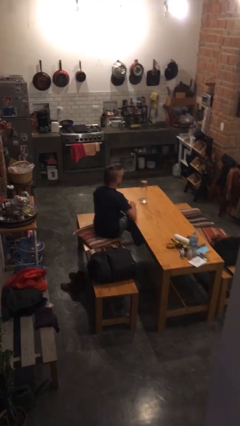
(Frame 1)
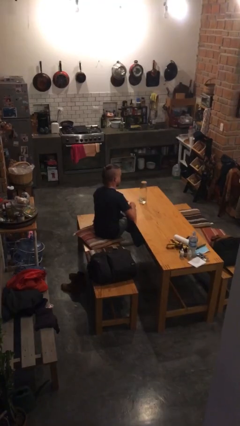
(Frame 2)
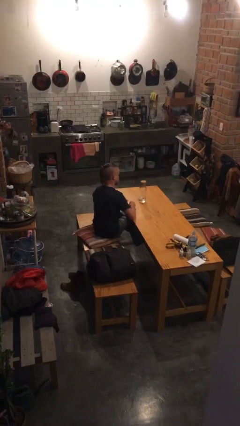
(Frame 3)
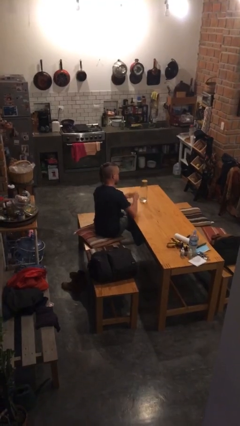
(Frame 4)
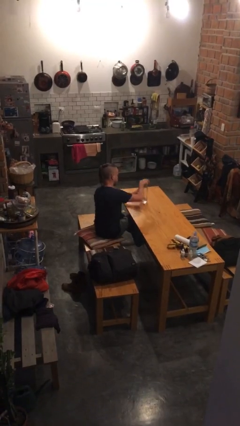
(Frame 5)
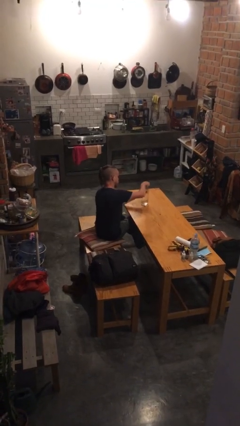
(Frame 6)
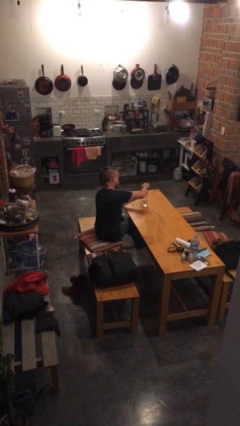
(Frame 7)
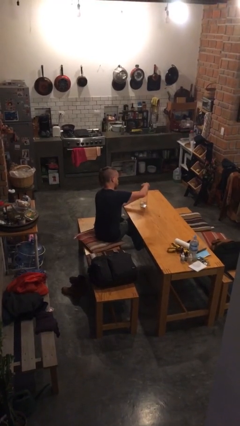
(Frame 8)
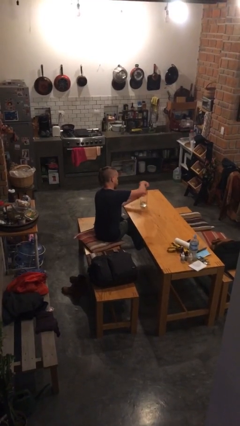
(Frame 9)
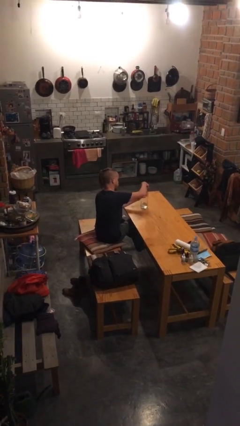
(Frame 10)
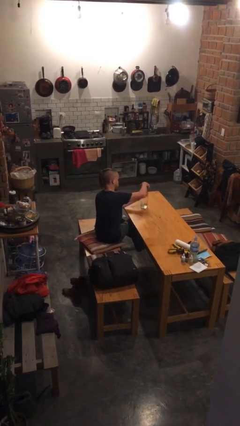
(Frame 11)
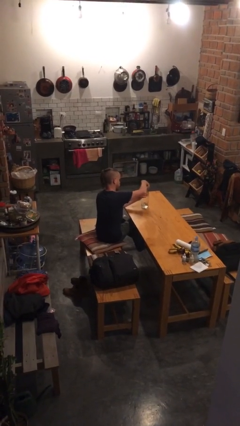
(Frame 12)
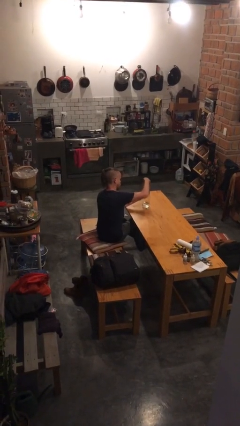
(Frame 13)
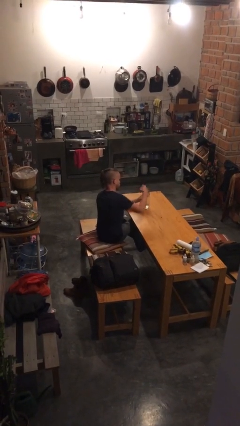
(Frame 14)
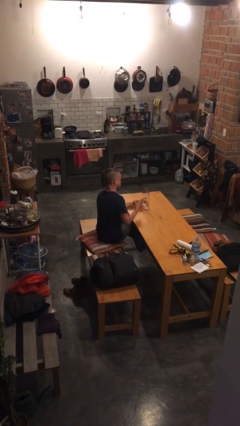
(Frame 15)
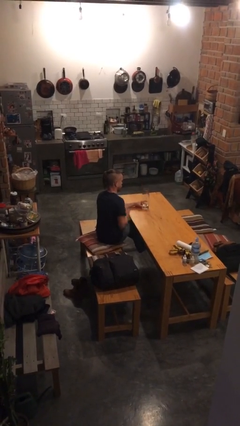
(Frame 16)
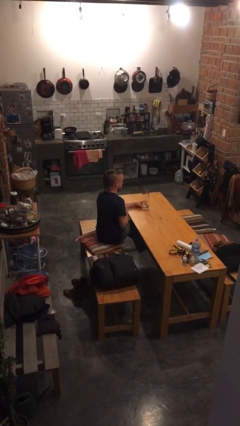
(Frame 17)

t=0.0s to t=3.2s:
person opens jar

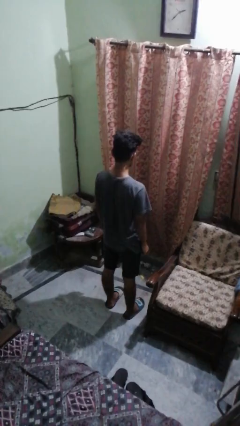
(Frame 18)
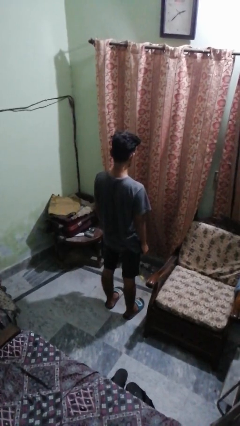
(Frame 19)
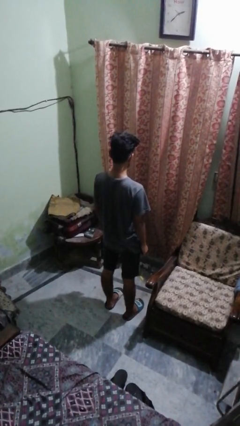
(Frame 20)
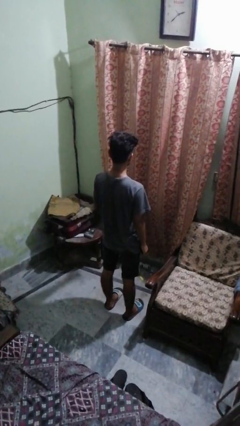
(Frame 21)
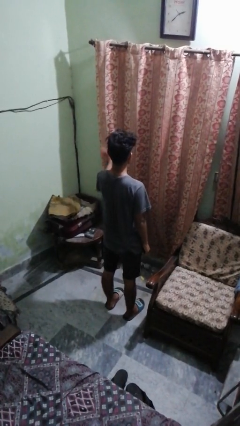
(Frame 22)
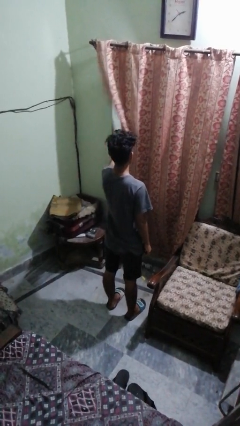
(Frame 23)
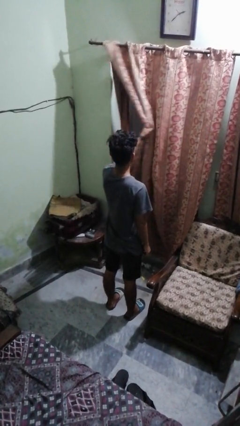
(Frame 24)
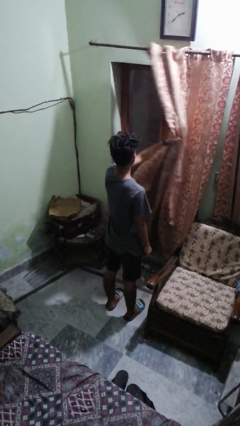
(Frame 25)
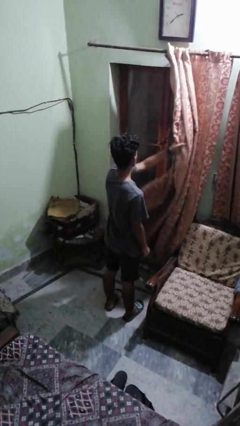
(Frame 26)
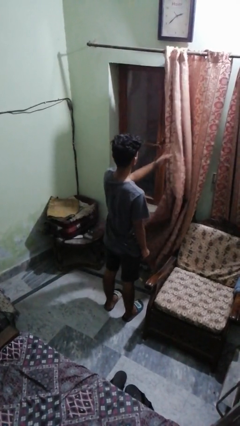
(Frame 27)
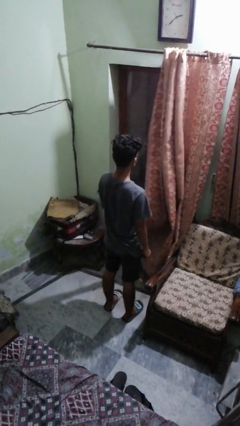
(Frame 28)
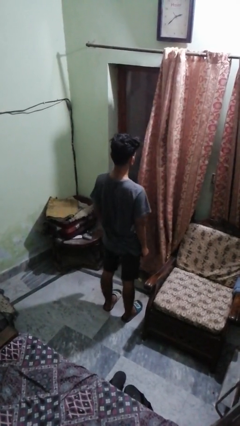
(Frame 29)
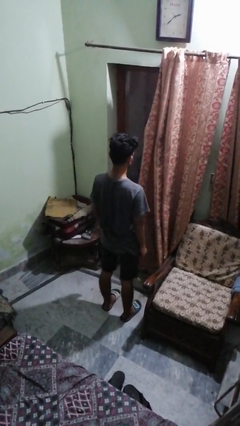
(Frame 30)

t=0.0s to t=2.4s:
person opens curtains

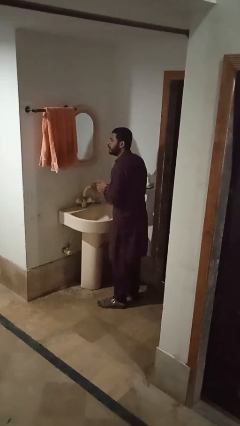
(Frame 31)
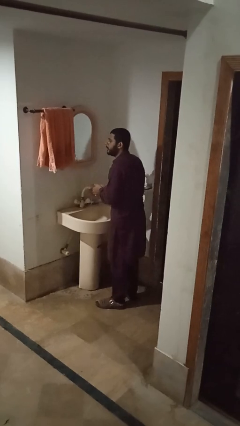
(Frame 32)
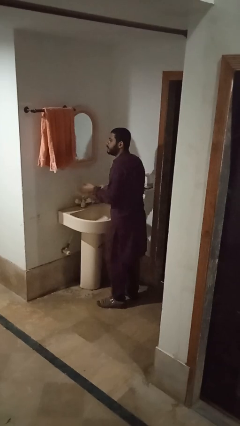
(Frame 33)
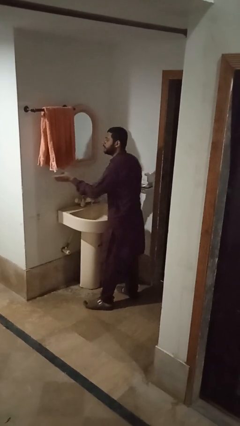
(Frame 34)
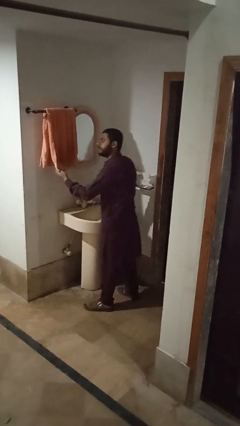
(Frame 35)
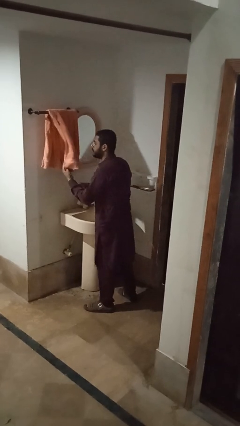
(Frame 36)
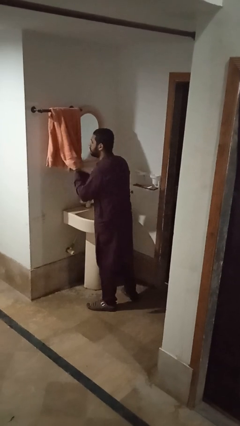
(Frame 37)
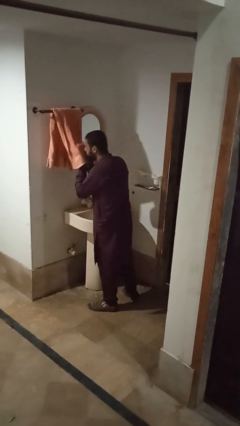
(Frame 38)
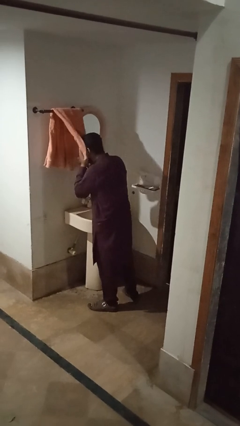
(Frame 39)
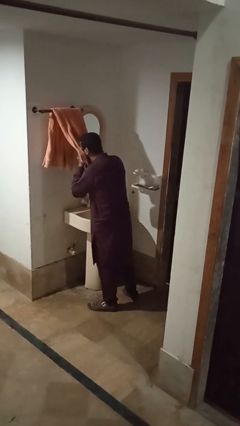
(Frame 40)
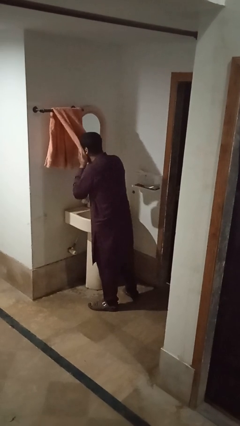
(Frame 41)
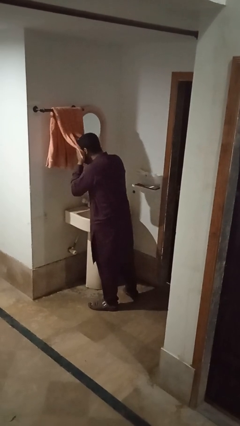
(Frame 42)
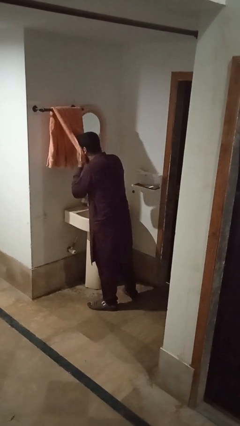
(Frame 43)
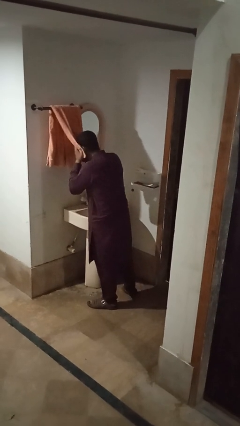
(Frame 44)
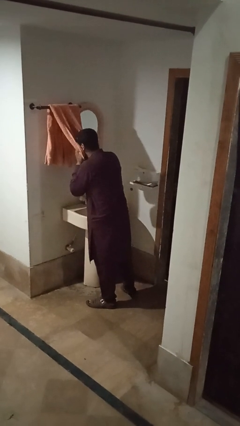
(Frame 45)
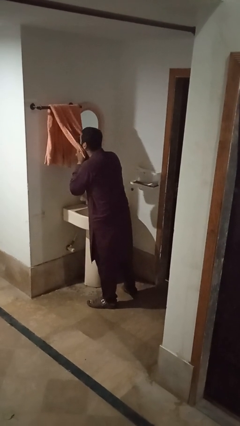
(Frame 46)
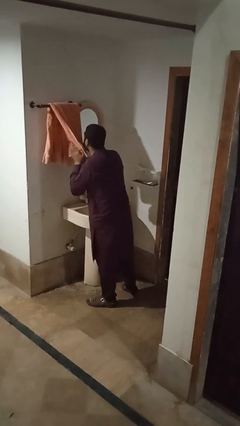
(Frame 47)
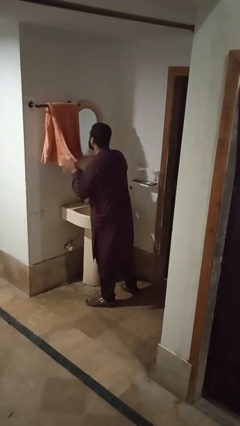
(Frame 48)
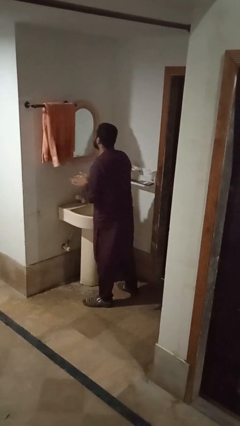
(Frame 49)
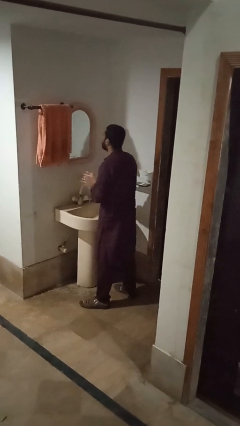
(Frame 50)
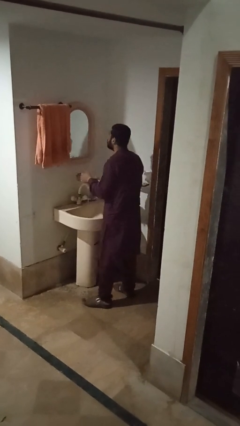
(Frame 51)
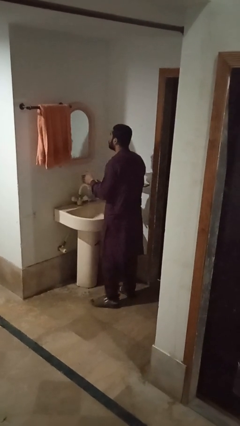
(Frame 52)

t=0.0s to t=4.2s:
person dries face with towel

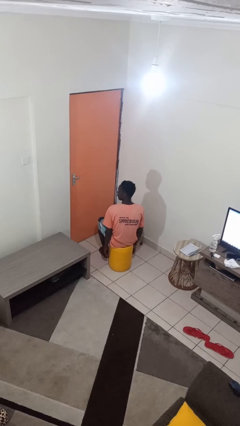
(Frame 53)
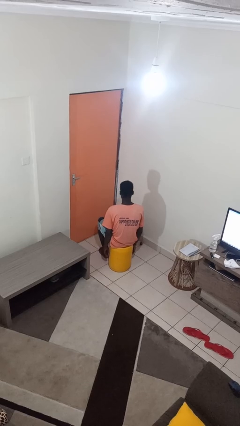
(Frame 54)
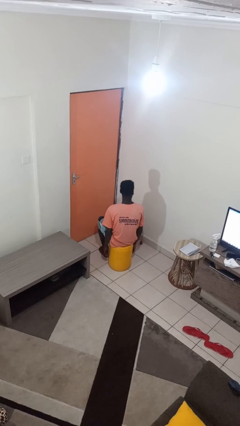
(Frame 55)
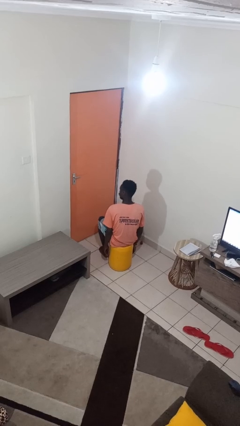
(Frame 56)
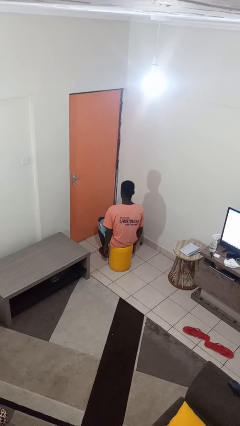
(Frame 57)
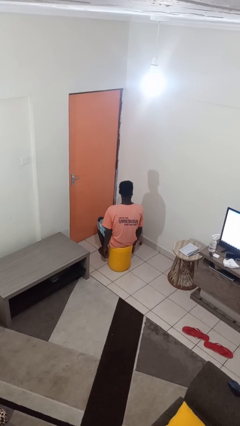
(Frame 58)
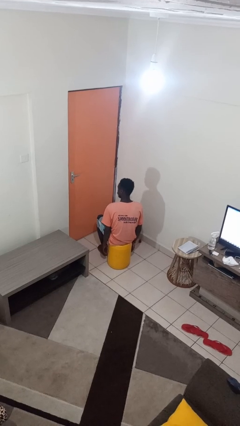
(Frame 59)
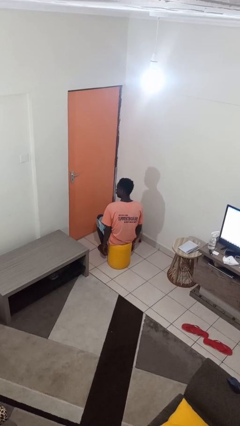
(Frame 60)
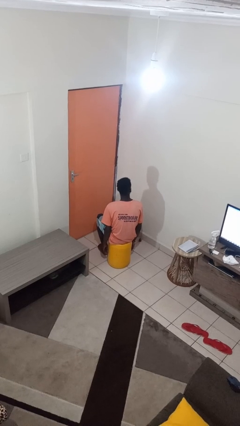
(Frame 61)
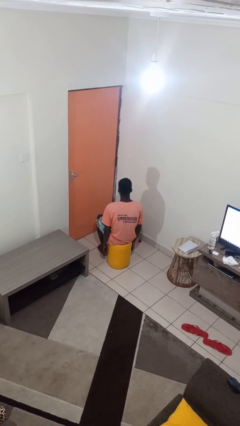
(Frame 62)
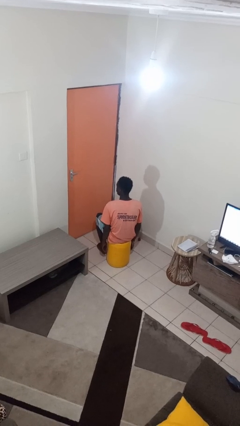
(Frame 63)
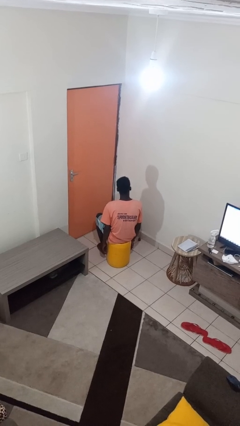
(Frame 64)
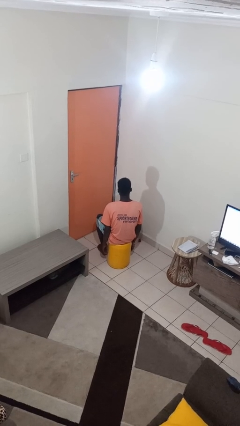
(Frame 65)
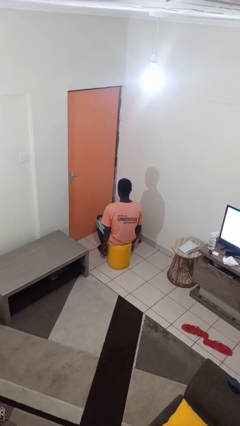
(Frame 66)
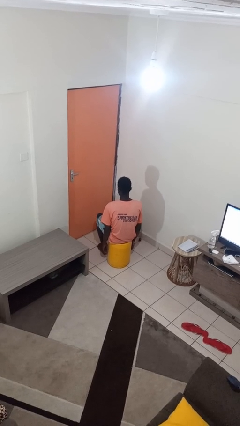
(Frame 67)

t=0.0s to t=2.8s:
person shakes head

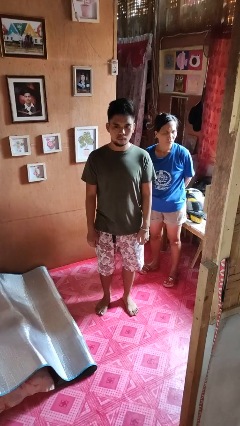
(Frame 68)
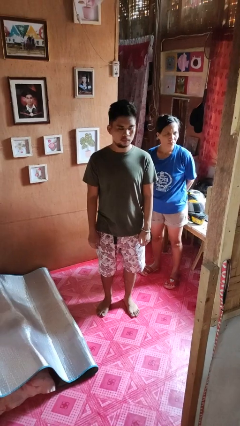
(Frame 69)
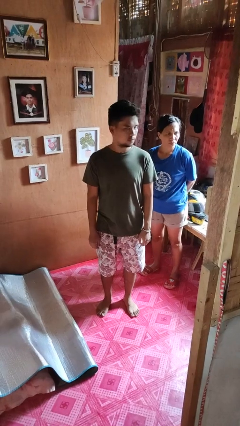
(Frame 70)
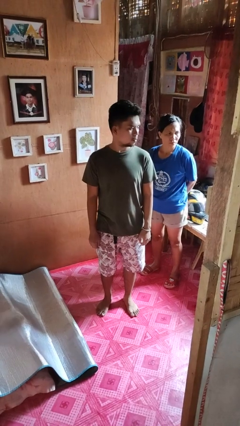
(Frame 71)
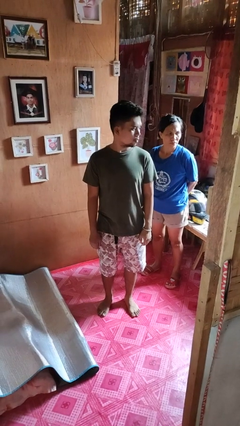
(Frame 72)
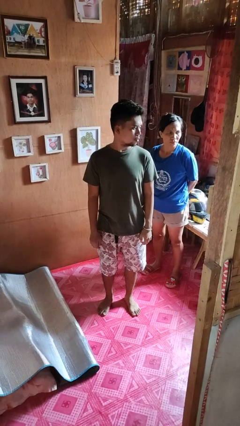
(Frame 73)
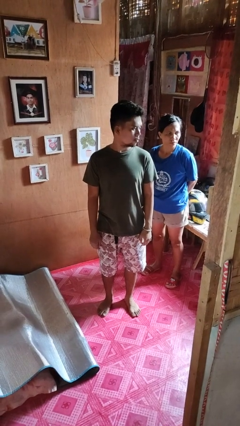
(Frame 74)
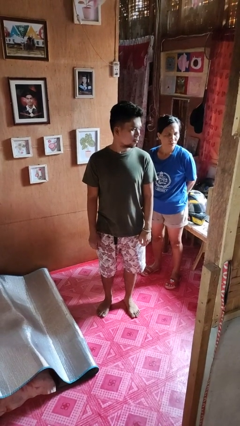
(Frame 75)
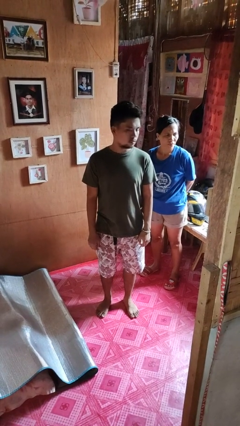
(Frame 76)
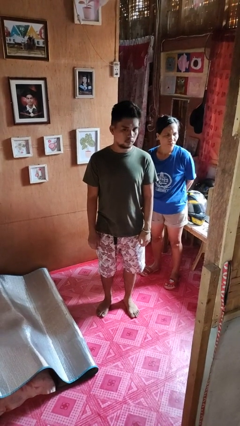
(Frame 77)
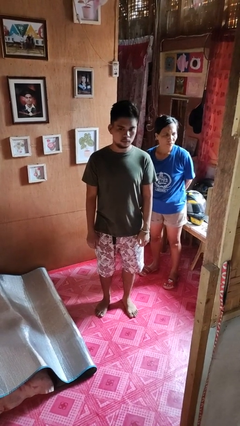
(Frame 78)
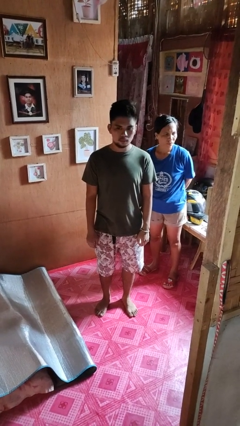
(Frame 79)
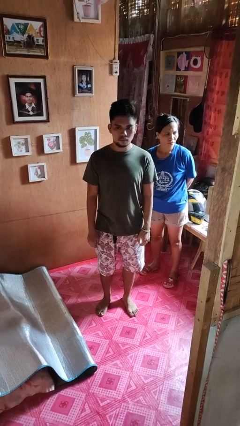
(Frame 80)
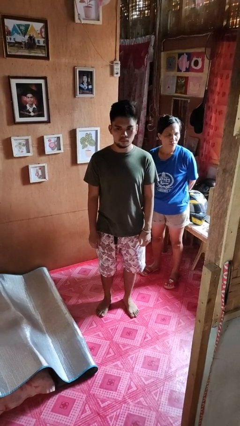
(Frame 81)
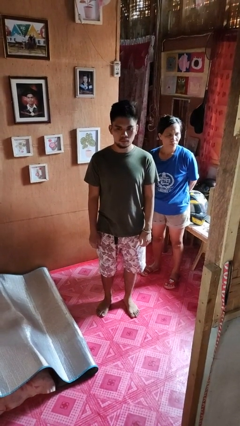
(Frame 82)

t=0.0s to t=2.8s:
person looks over shoulder

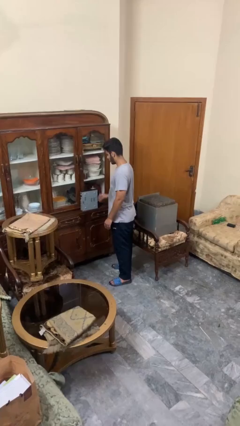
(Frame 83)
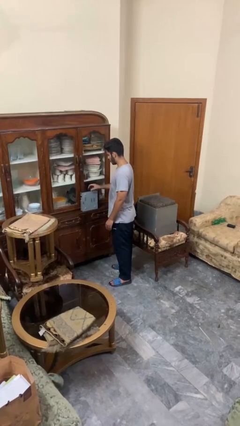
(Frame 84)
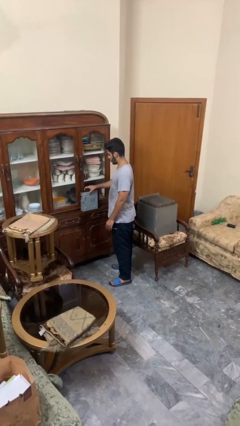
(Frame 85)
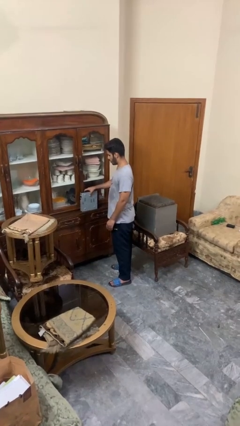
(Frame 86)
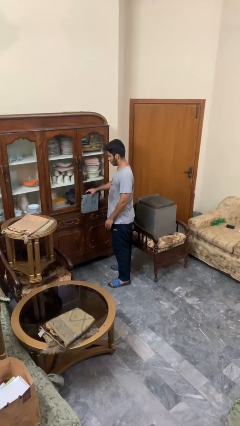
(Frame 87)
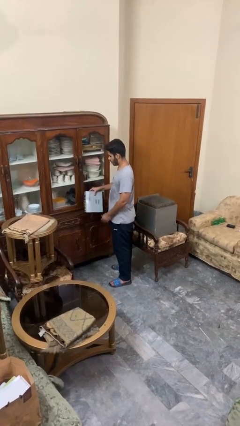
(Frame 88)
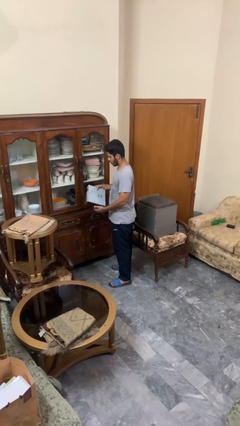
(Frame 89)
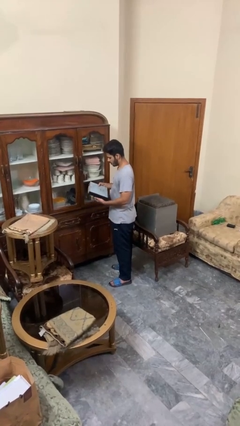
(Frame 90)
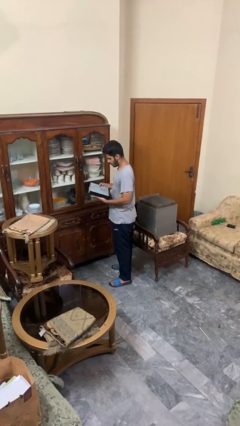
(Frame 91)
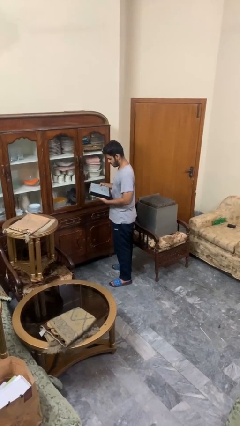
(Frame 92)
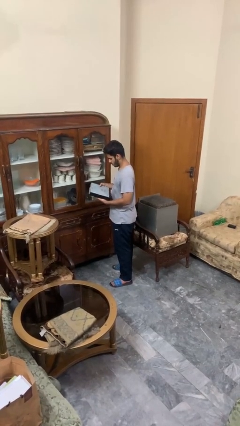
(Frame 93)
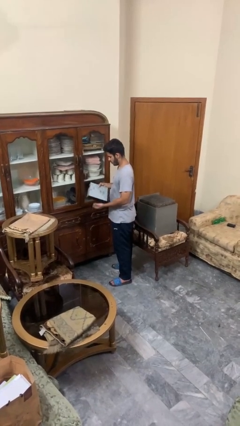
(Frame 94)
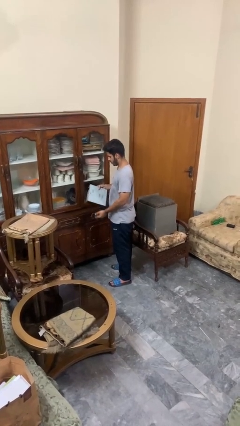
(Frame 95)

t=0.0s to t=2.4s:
person picks up object from countertop

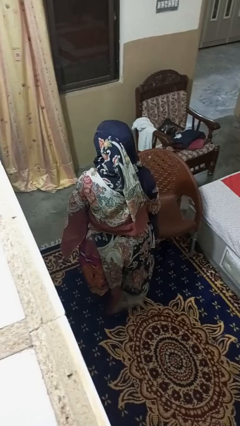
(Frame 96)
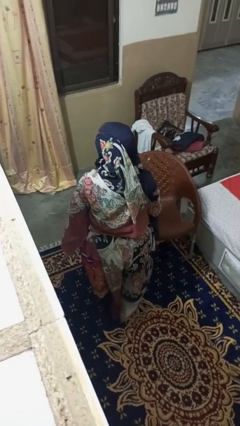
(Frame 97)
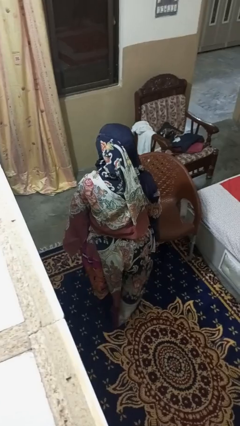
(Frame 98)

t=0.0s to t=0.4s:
person lies down on floor
